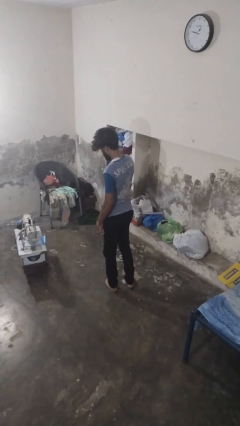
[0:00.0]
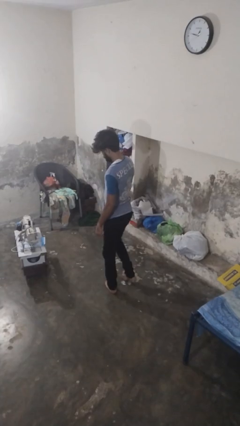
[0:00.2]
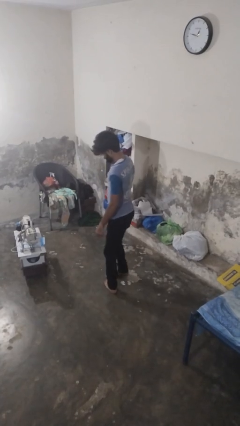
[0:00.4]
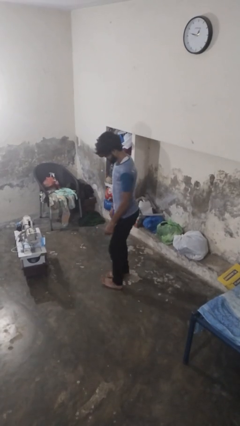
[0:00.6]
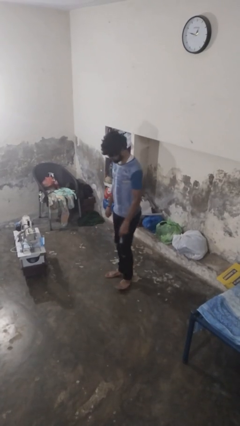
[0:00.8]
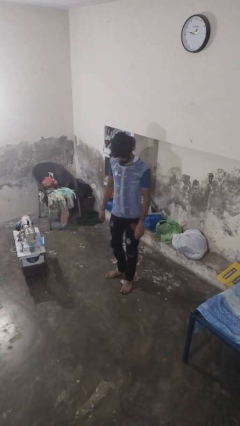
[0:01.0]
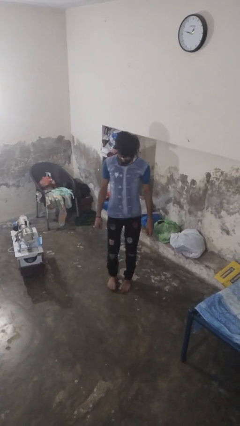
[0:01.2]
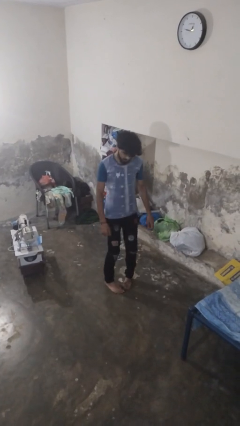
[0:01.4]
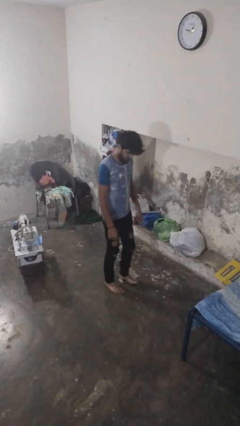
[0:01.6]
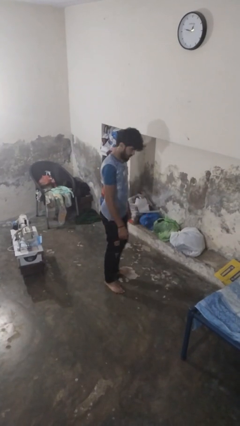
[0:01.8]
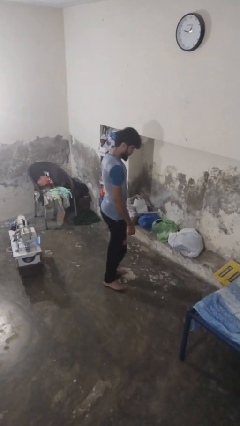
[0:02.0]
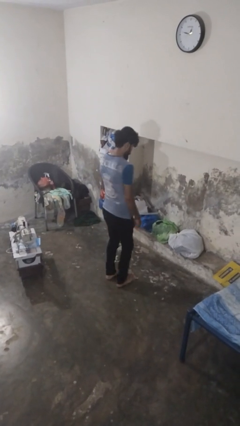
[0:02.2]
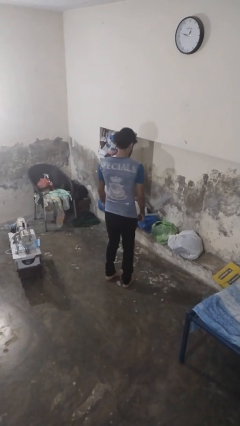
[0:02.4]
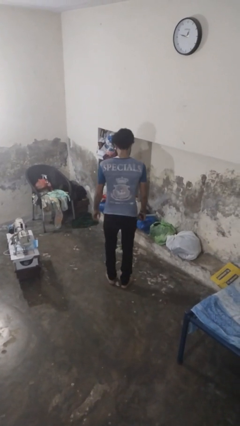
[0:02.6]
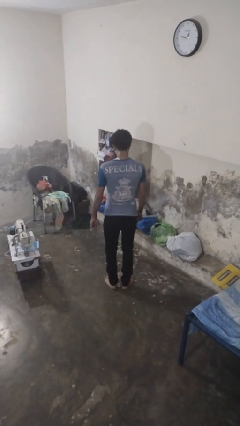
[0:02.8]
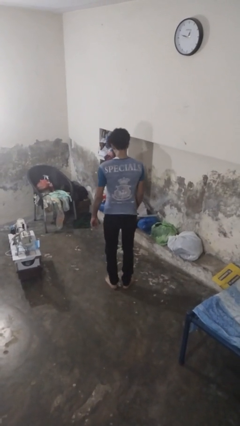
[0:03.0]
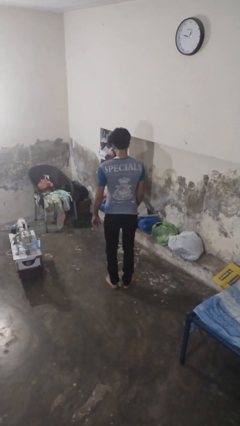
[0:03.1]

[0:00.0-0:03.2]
person twirls

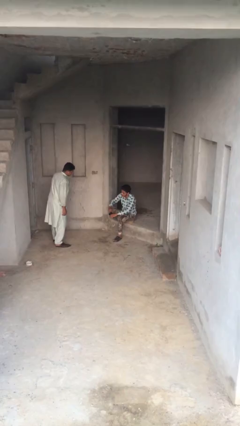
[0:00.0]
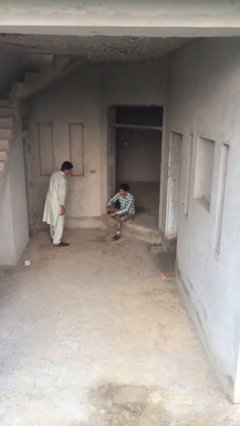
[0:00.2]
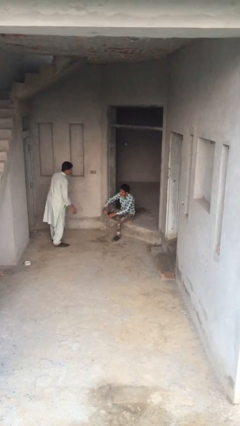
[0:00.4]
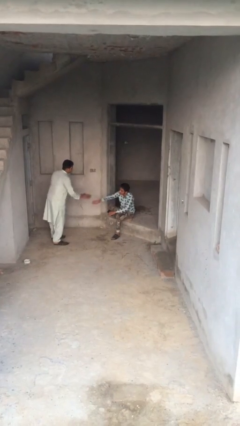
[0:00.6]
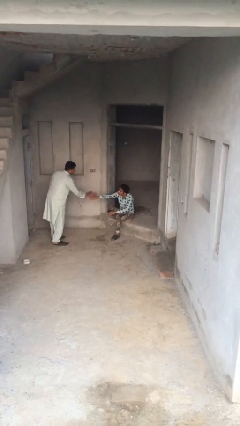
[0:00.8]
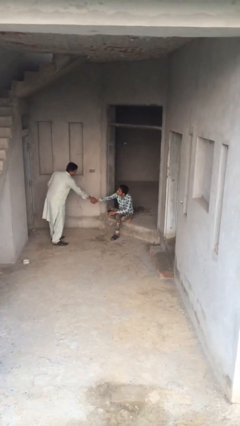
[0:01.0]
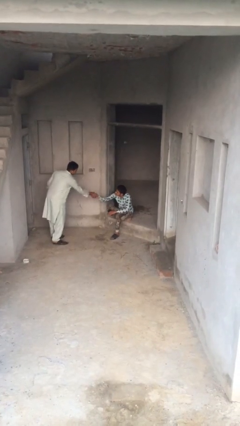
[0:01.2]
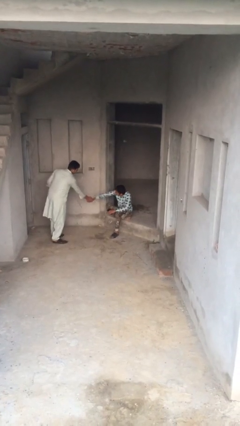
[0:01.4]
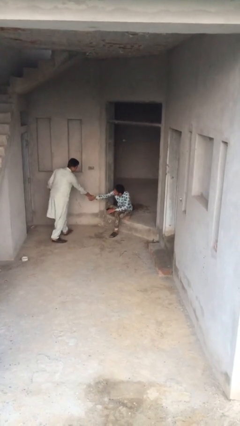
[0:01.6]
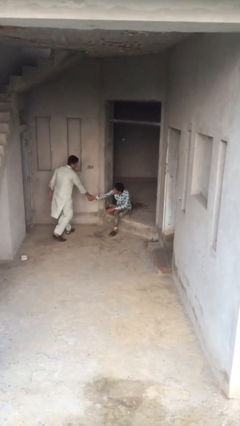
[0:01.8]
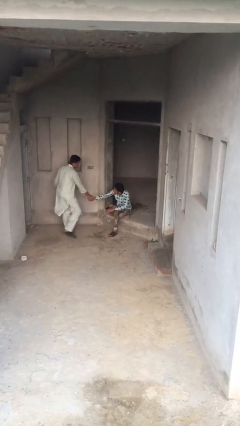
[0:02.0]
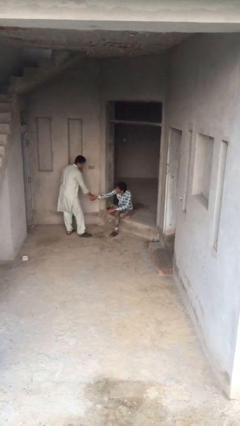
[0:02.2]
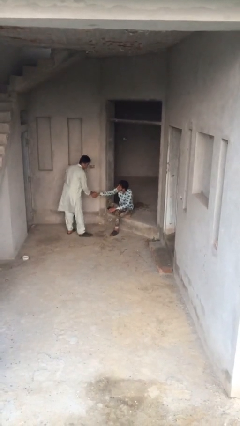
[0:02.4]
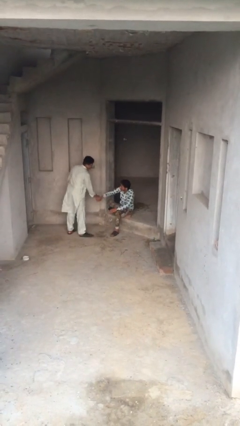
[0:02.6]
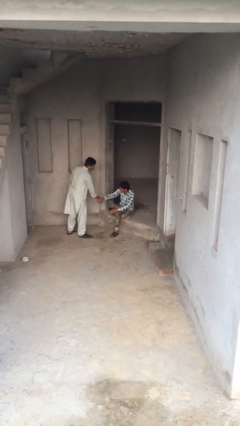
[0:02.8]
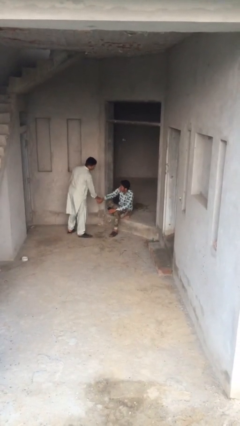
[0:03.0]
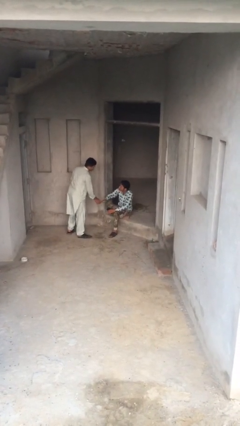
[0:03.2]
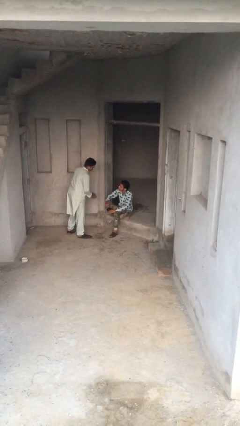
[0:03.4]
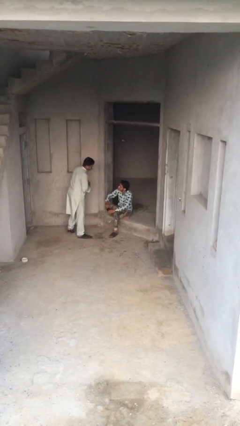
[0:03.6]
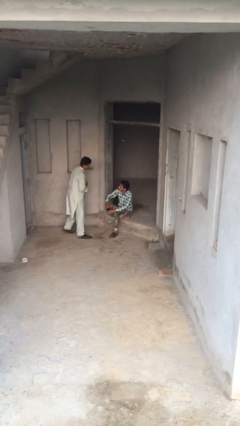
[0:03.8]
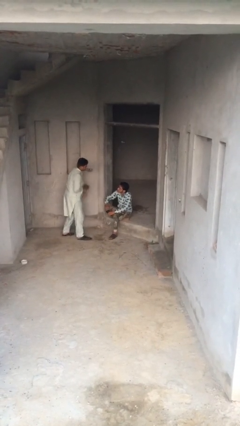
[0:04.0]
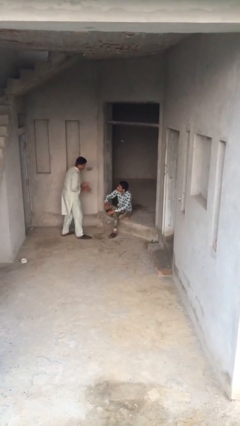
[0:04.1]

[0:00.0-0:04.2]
person shakes hand

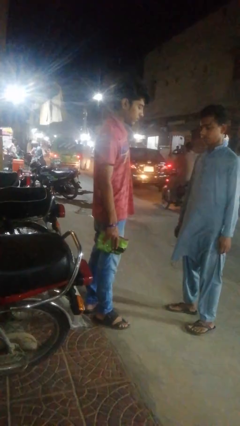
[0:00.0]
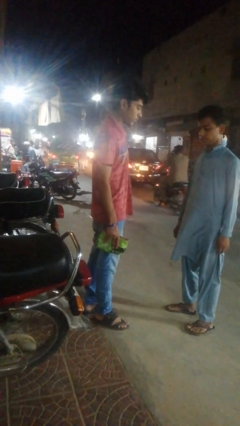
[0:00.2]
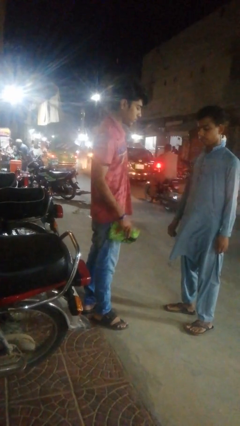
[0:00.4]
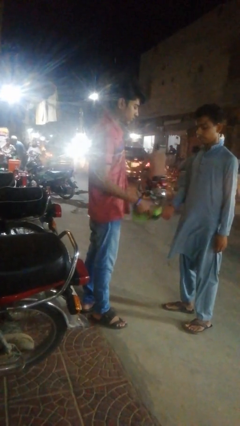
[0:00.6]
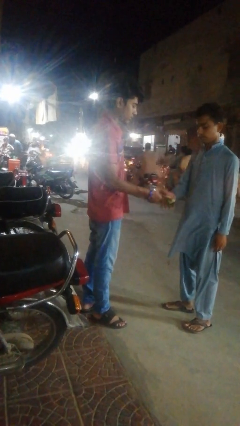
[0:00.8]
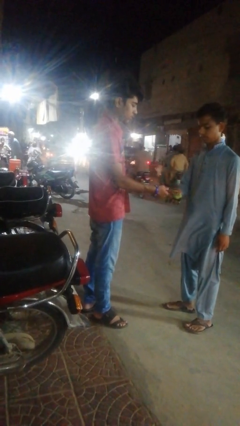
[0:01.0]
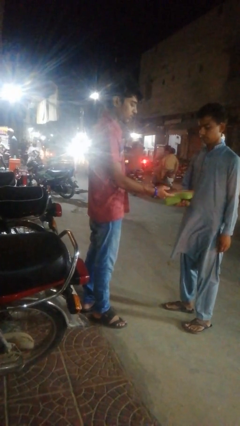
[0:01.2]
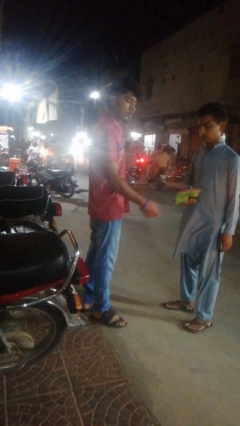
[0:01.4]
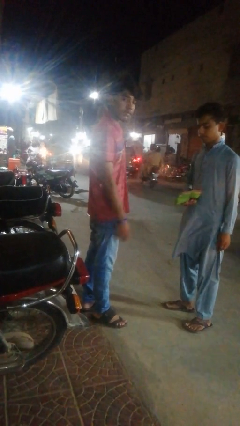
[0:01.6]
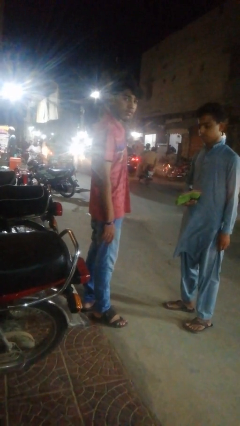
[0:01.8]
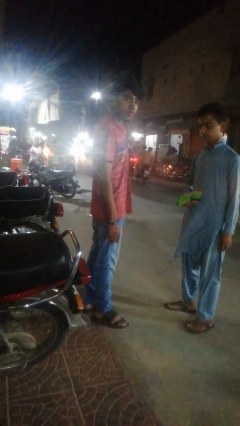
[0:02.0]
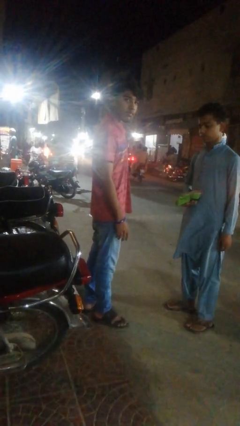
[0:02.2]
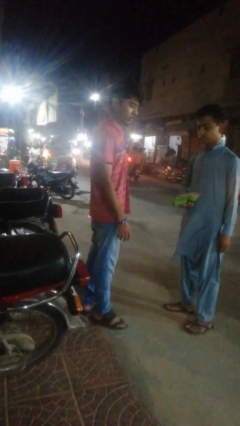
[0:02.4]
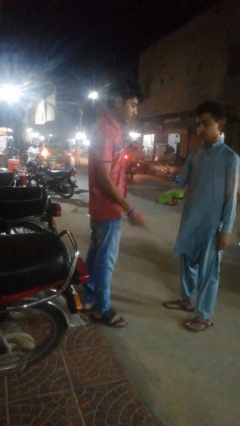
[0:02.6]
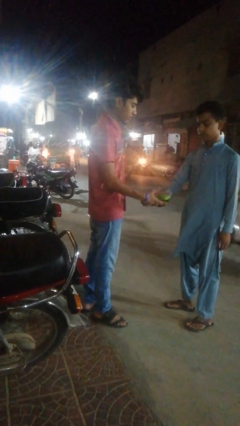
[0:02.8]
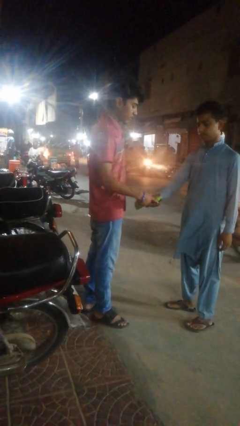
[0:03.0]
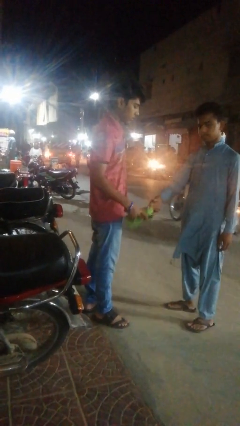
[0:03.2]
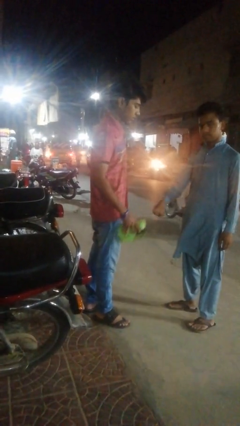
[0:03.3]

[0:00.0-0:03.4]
person transfers object to person

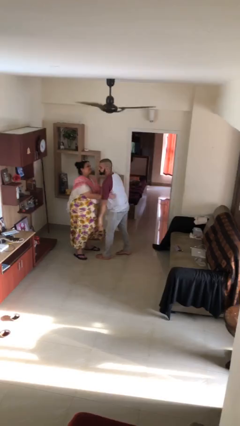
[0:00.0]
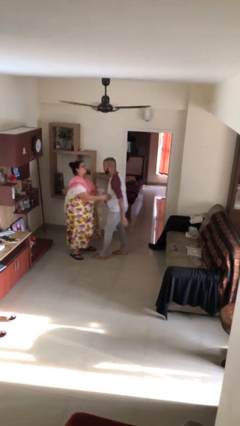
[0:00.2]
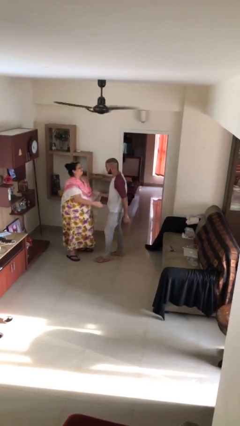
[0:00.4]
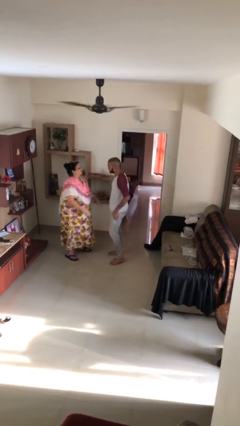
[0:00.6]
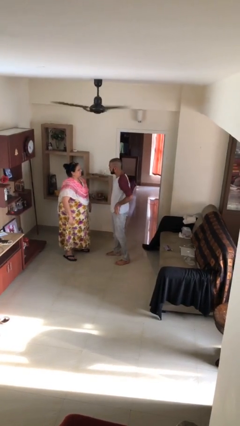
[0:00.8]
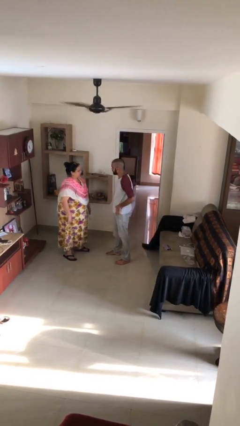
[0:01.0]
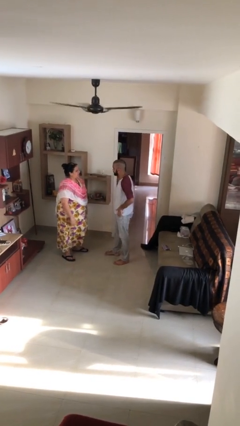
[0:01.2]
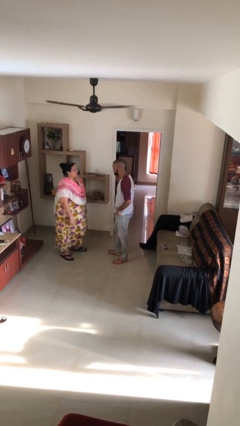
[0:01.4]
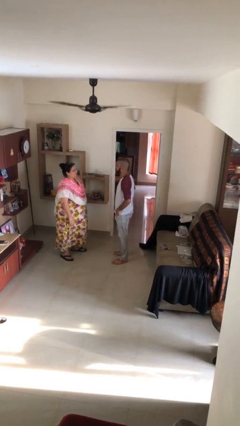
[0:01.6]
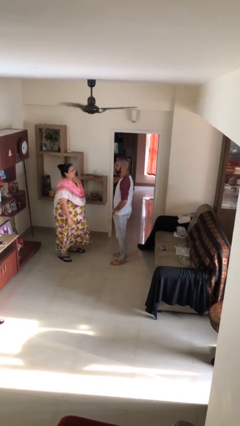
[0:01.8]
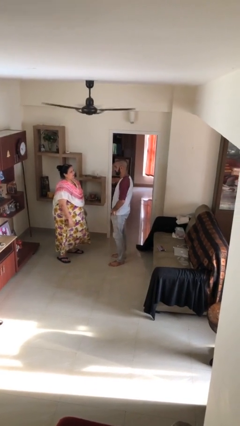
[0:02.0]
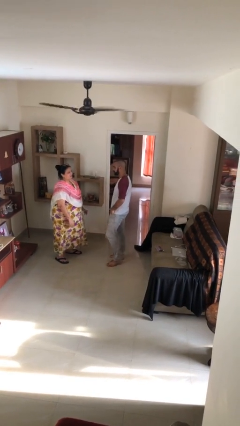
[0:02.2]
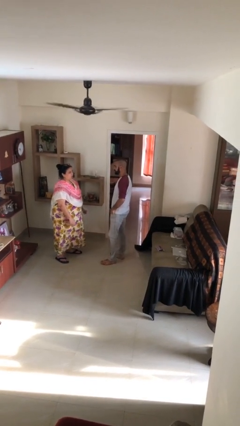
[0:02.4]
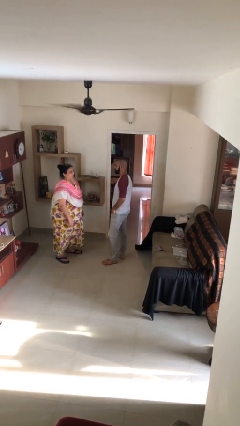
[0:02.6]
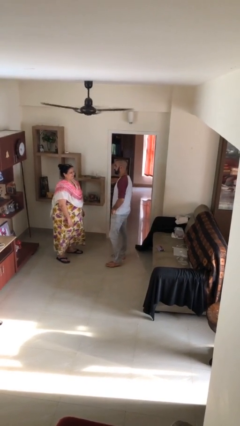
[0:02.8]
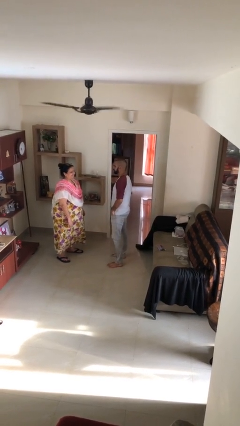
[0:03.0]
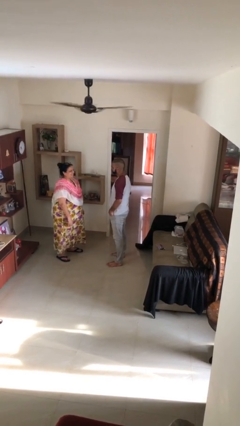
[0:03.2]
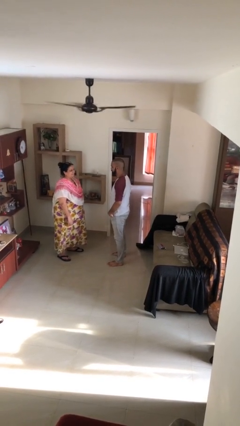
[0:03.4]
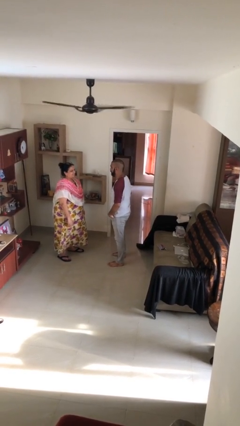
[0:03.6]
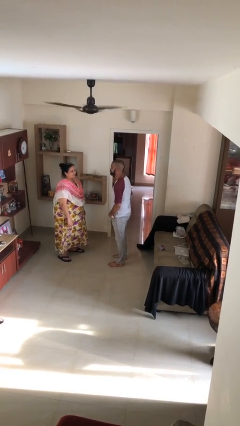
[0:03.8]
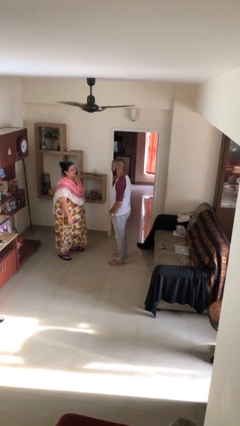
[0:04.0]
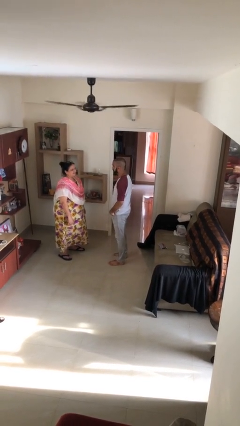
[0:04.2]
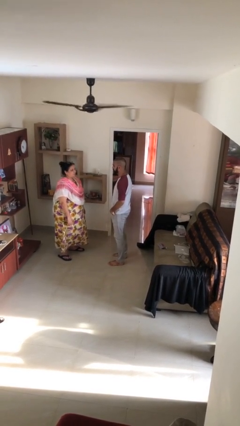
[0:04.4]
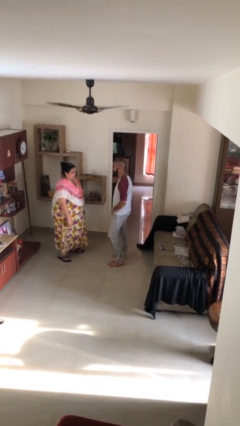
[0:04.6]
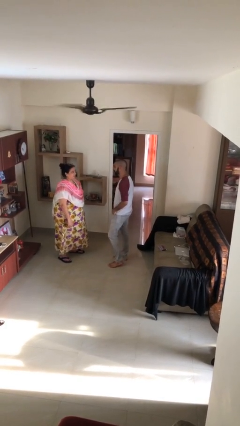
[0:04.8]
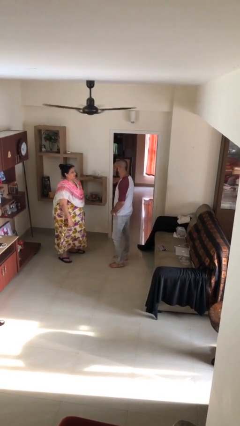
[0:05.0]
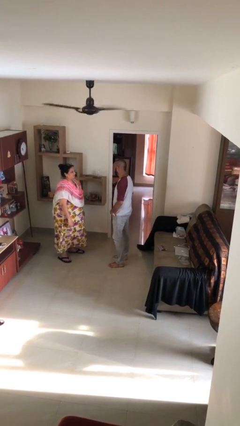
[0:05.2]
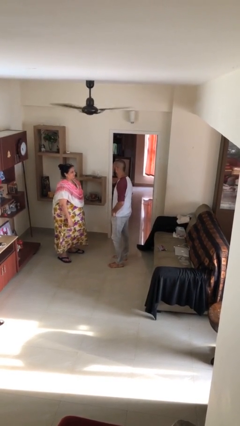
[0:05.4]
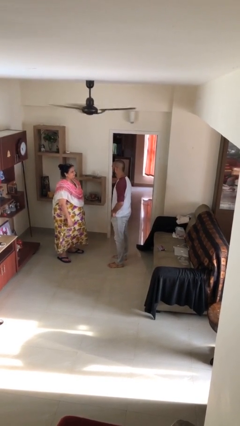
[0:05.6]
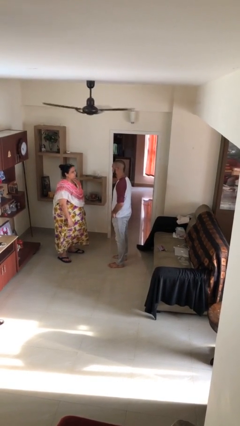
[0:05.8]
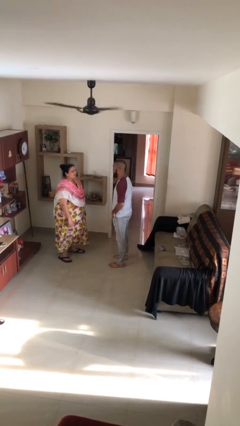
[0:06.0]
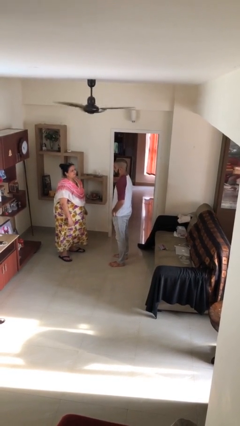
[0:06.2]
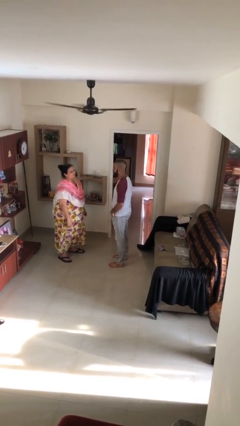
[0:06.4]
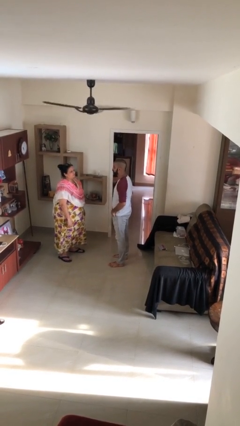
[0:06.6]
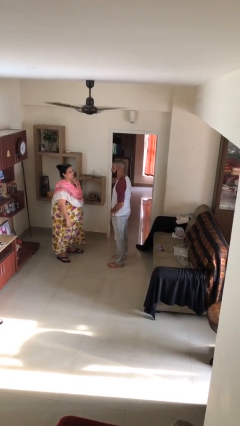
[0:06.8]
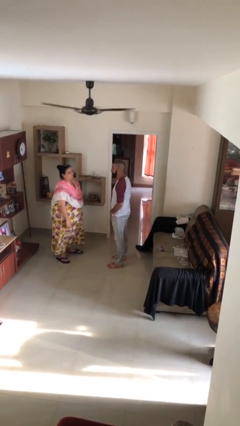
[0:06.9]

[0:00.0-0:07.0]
person talks to person
